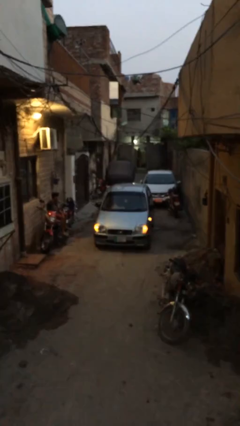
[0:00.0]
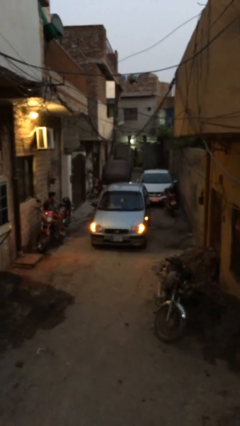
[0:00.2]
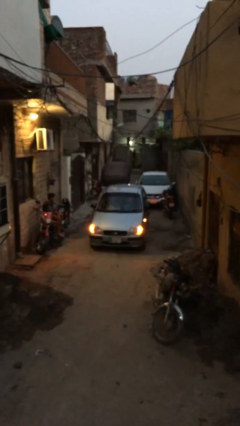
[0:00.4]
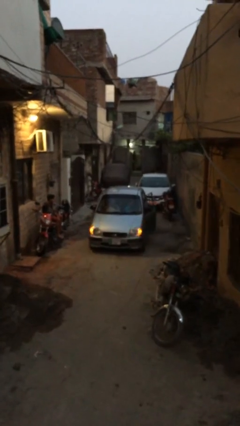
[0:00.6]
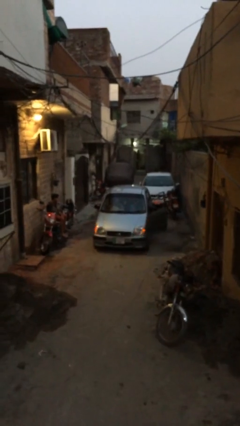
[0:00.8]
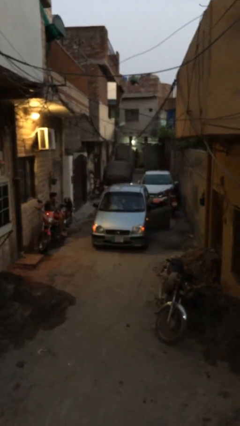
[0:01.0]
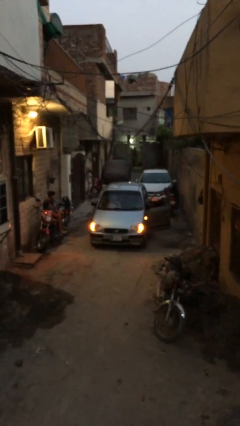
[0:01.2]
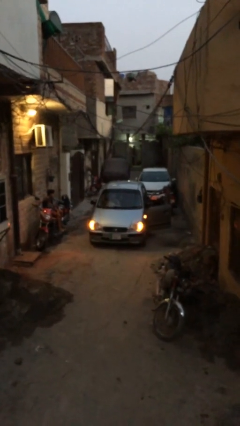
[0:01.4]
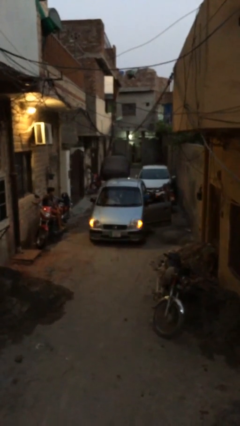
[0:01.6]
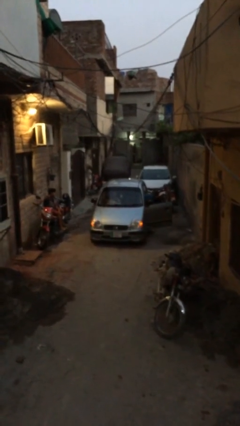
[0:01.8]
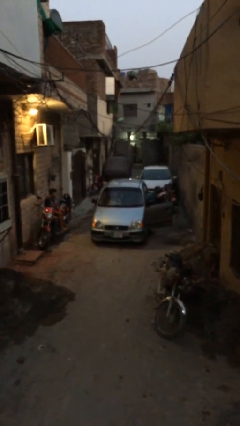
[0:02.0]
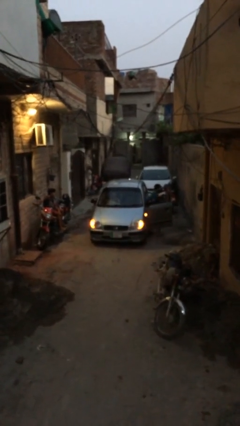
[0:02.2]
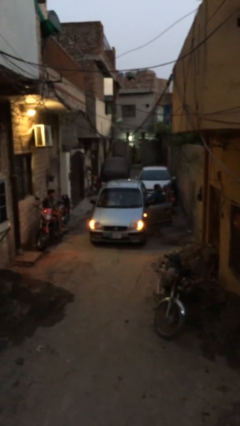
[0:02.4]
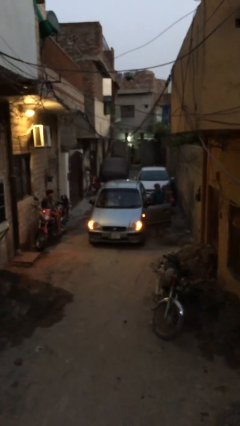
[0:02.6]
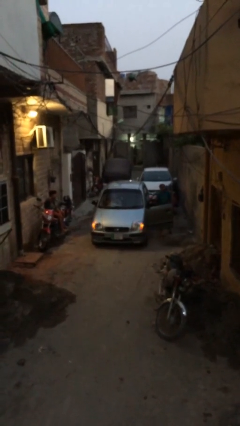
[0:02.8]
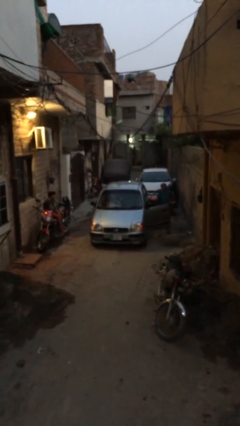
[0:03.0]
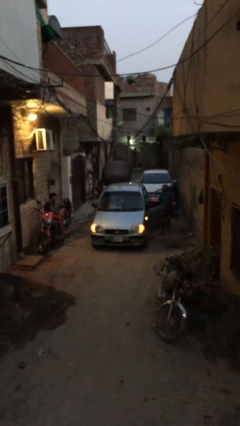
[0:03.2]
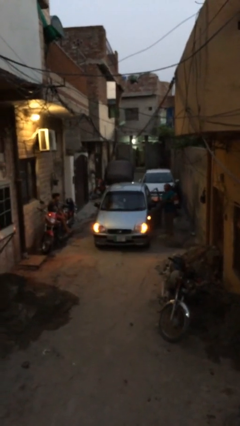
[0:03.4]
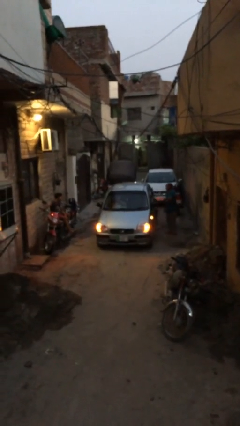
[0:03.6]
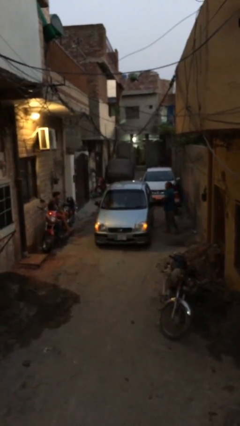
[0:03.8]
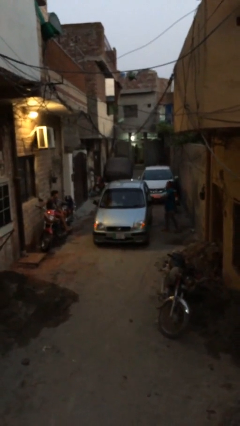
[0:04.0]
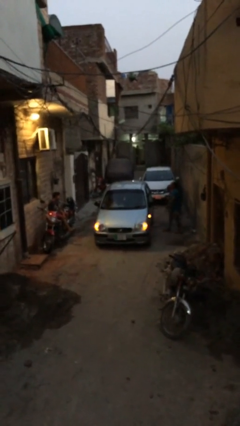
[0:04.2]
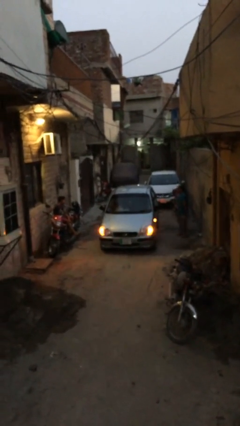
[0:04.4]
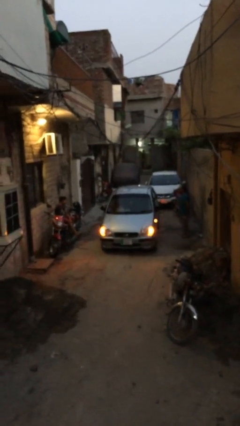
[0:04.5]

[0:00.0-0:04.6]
car drops off person

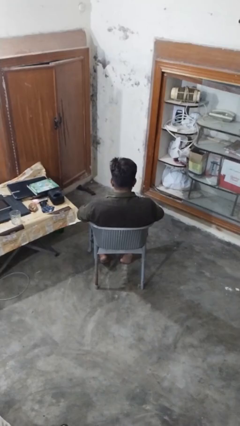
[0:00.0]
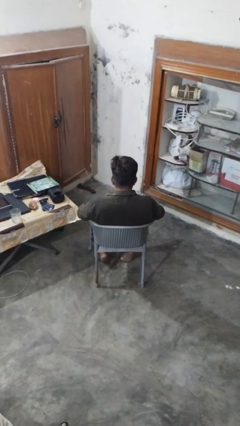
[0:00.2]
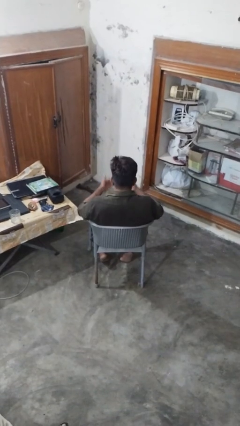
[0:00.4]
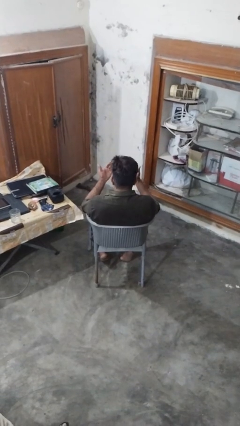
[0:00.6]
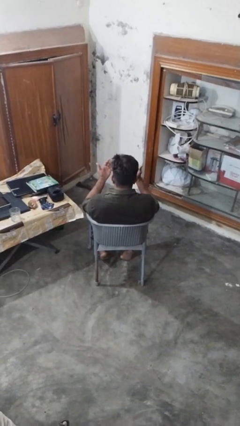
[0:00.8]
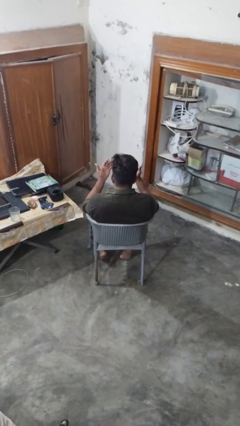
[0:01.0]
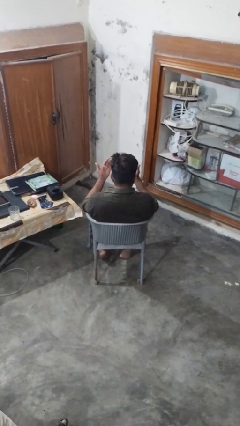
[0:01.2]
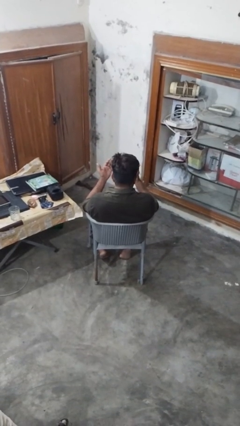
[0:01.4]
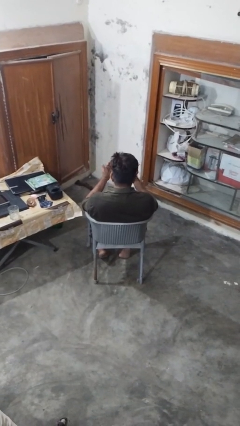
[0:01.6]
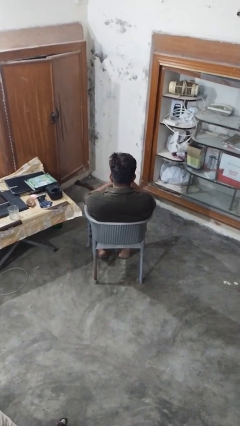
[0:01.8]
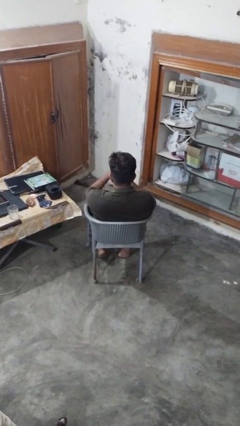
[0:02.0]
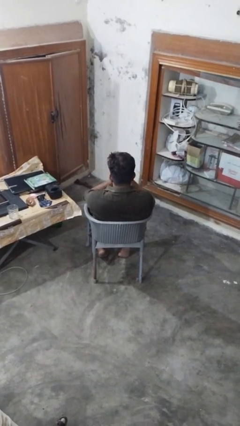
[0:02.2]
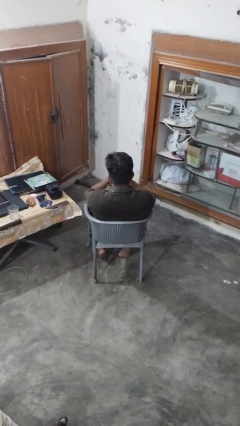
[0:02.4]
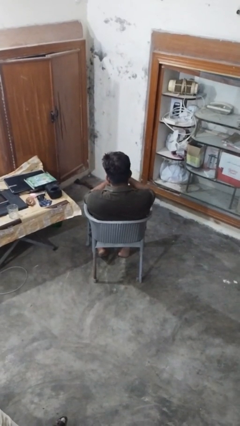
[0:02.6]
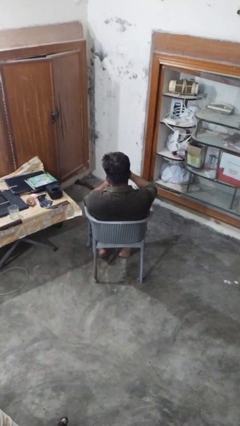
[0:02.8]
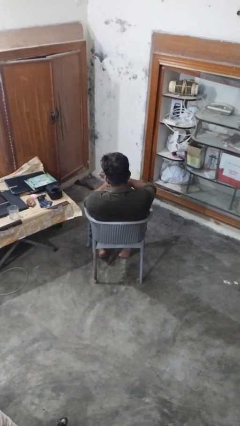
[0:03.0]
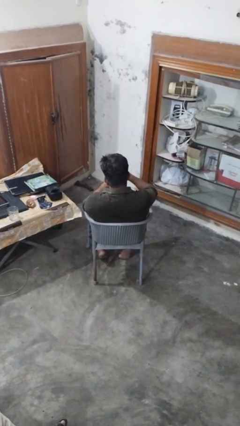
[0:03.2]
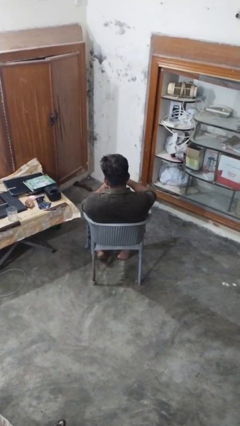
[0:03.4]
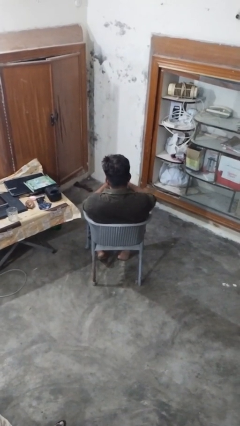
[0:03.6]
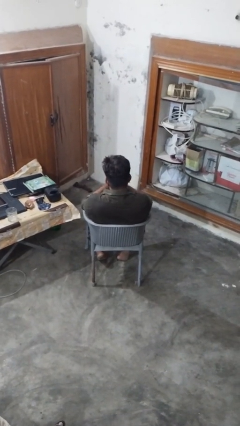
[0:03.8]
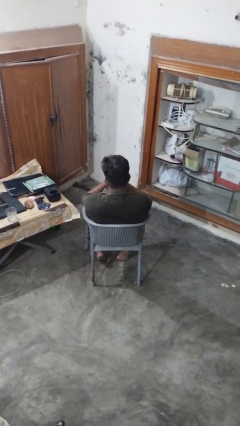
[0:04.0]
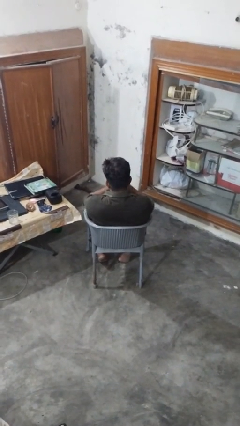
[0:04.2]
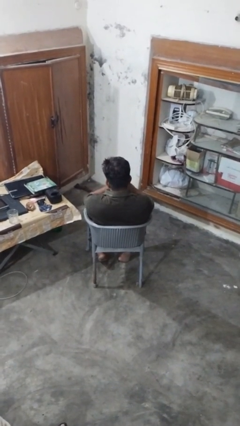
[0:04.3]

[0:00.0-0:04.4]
person looks at hands in lap

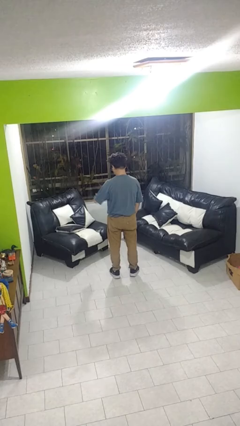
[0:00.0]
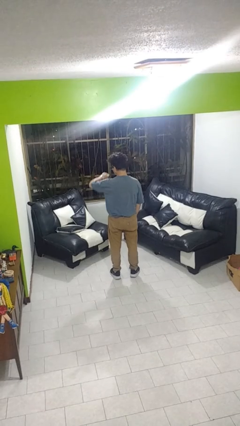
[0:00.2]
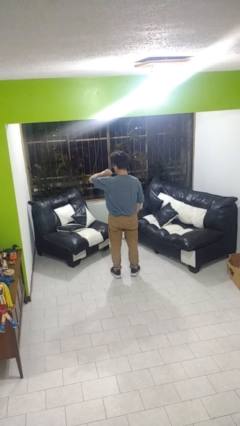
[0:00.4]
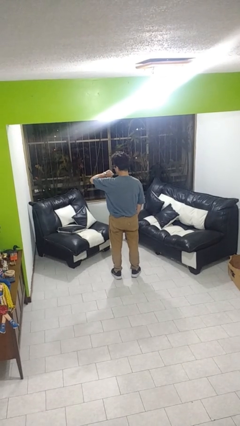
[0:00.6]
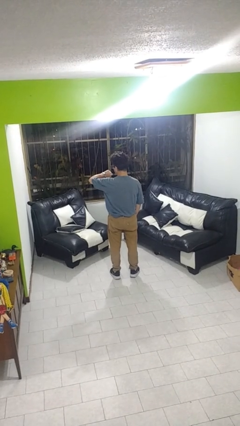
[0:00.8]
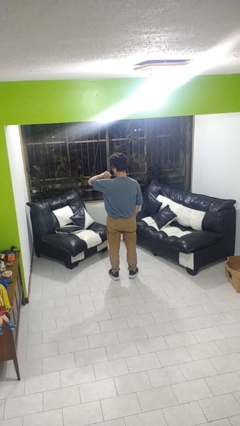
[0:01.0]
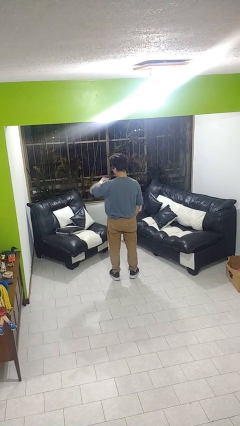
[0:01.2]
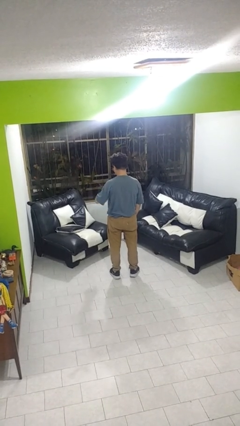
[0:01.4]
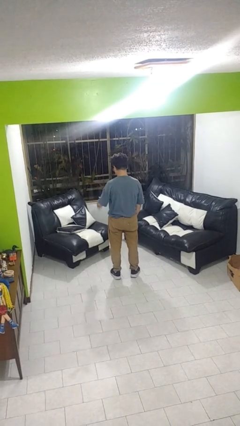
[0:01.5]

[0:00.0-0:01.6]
person looks at wristwatch

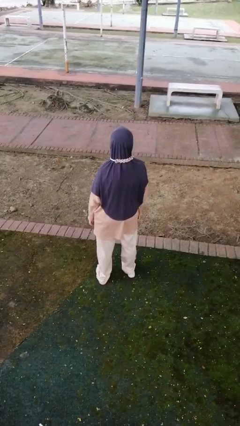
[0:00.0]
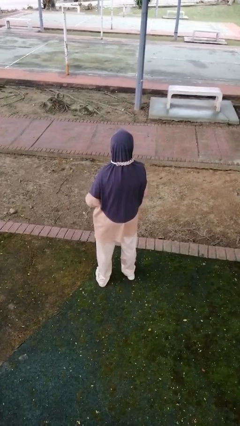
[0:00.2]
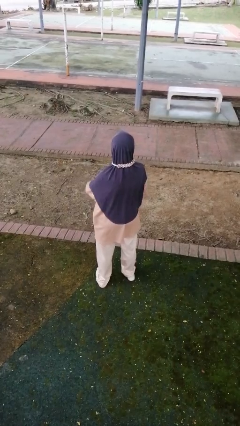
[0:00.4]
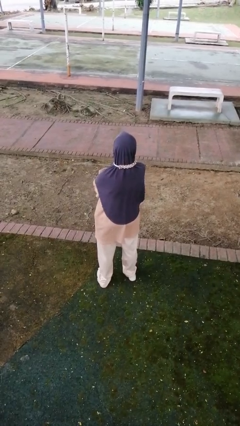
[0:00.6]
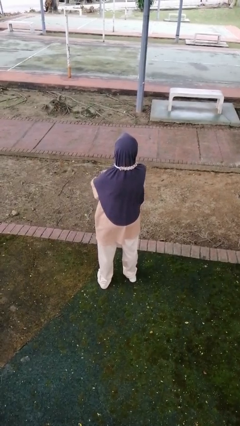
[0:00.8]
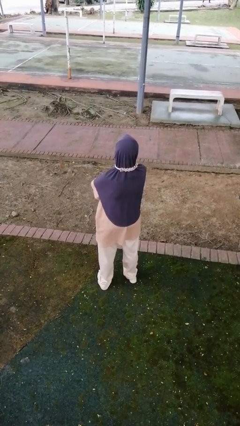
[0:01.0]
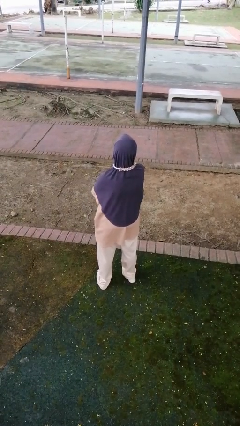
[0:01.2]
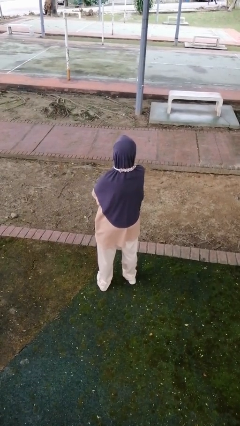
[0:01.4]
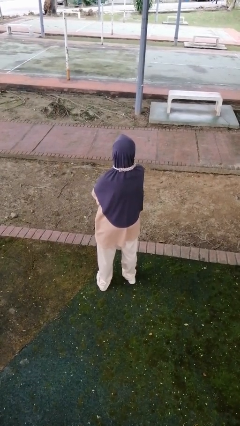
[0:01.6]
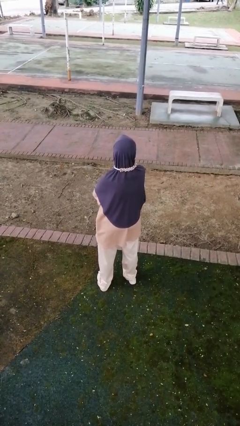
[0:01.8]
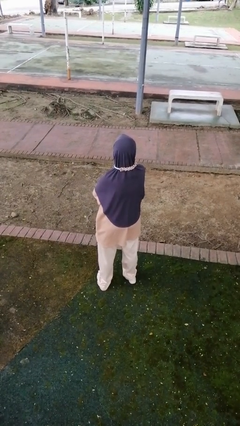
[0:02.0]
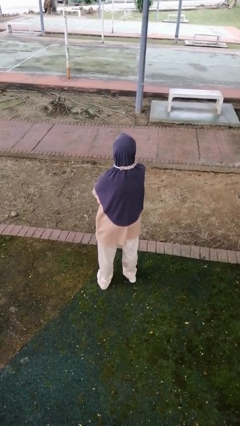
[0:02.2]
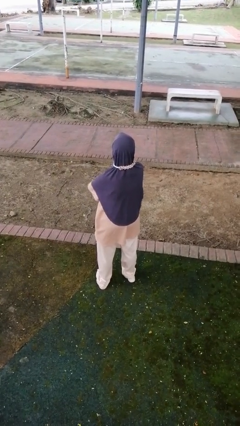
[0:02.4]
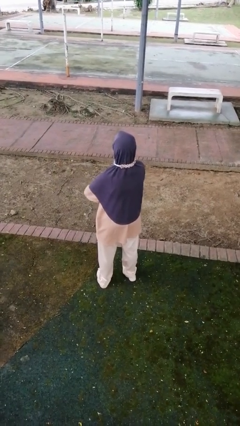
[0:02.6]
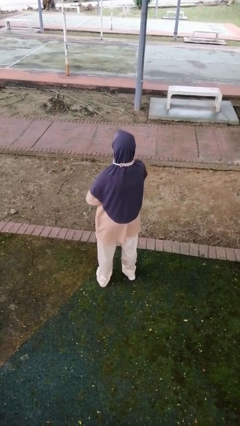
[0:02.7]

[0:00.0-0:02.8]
person crosses arms

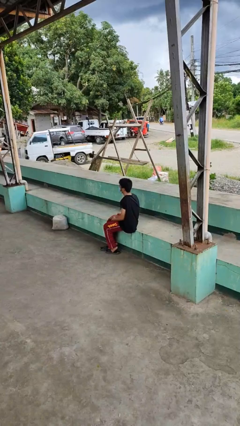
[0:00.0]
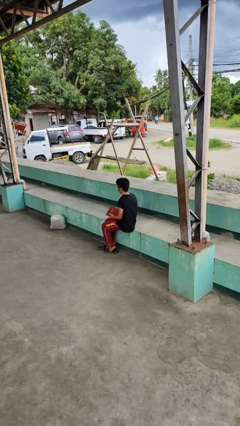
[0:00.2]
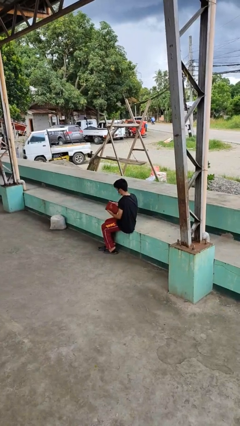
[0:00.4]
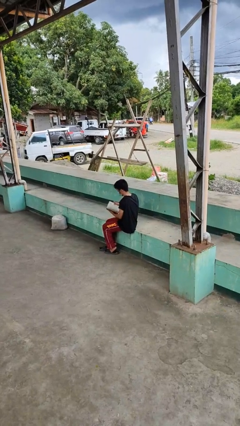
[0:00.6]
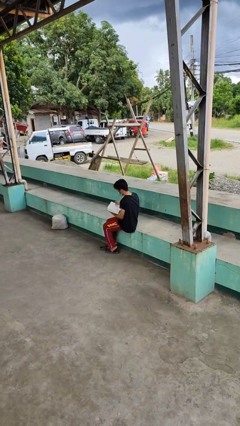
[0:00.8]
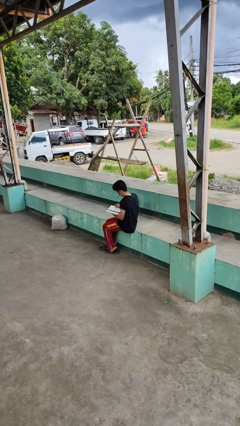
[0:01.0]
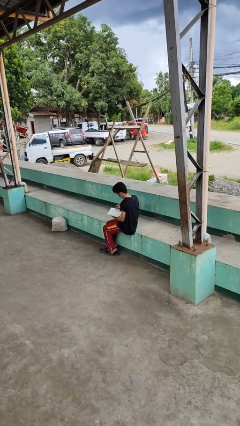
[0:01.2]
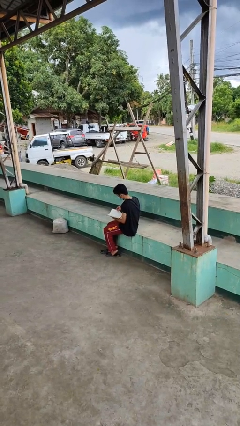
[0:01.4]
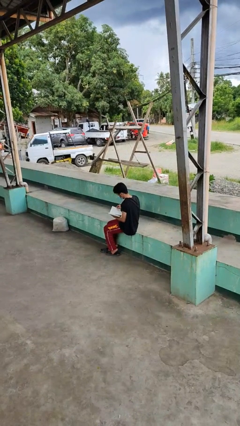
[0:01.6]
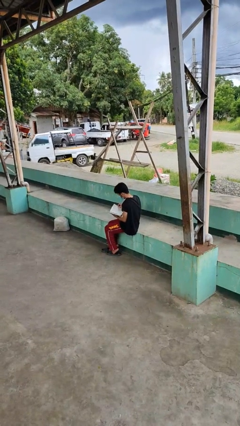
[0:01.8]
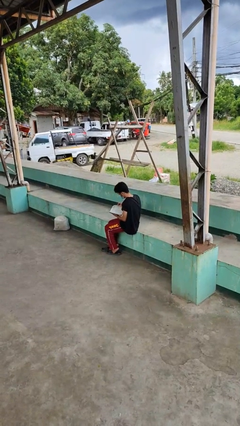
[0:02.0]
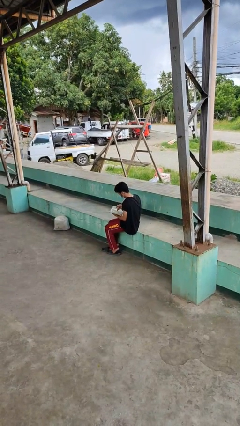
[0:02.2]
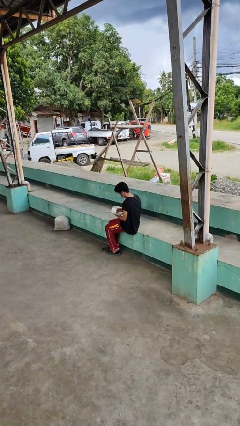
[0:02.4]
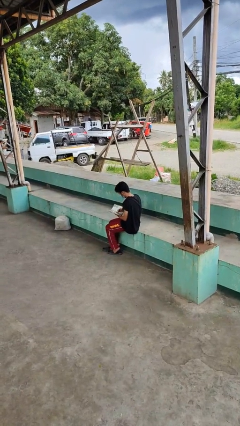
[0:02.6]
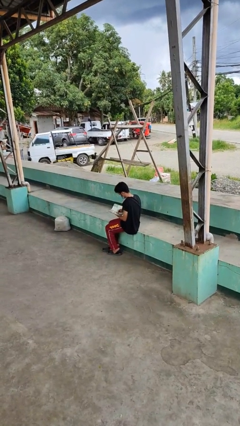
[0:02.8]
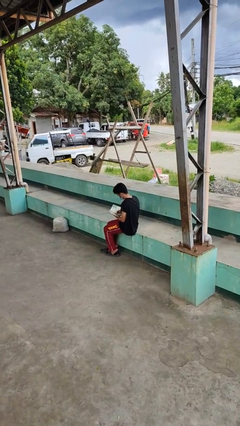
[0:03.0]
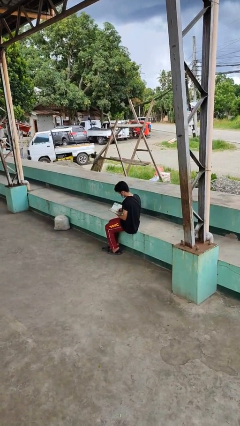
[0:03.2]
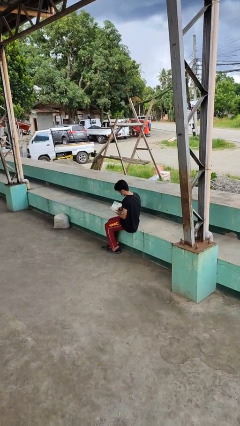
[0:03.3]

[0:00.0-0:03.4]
person reads book

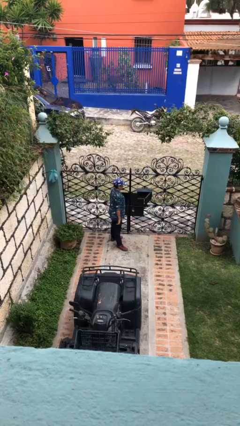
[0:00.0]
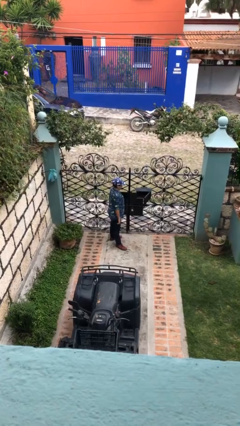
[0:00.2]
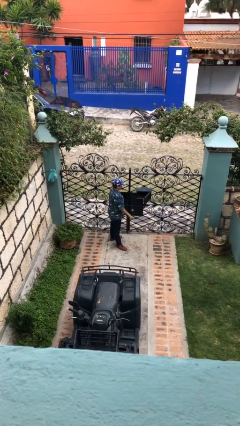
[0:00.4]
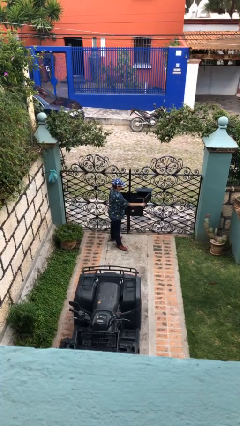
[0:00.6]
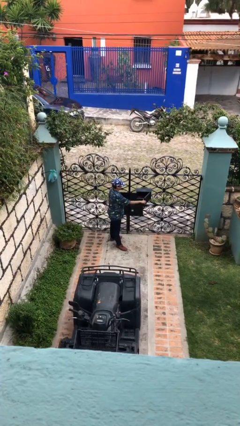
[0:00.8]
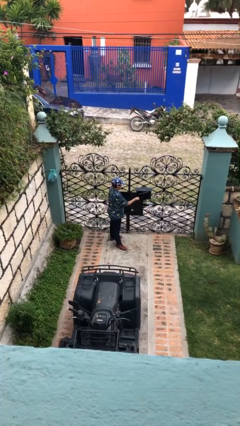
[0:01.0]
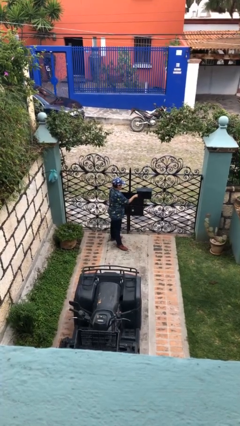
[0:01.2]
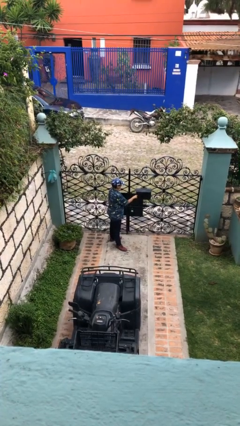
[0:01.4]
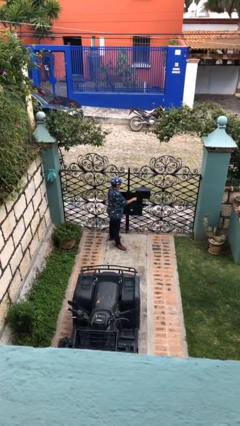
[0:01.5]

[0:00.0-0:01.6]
person closes mailbox
